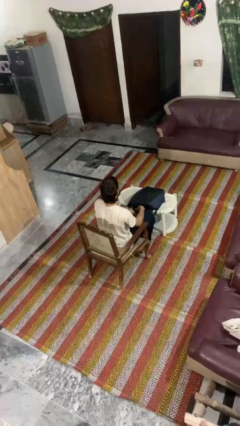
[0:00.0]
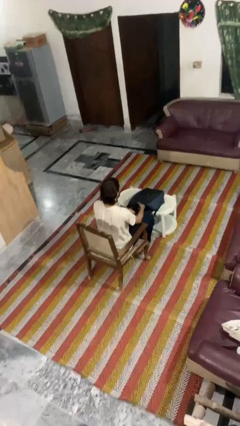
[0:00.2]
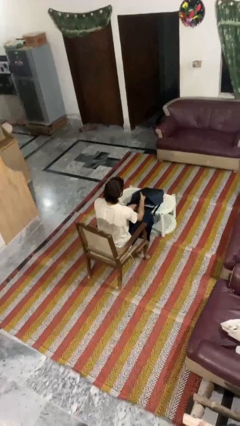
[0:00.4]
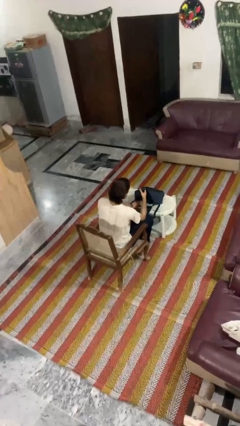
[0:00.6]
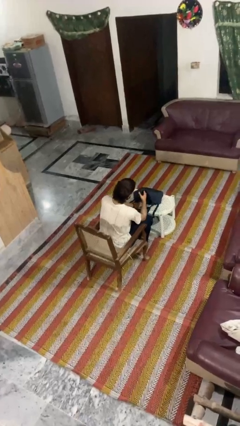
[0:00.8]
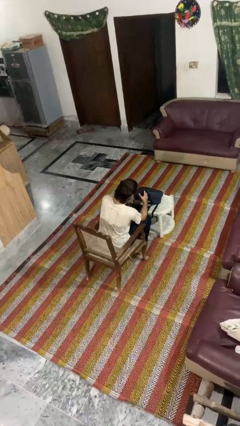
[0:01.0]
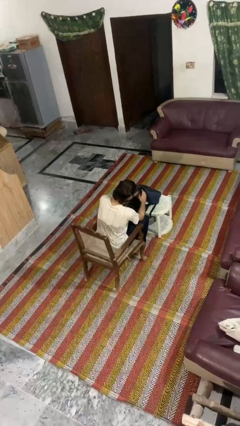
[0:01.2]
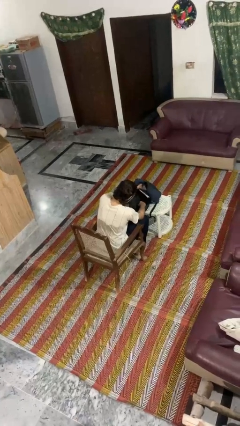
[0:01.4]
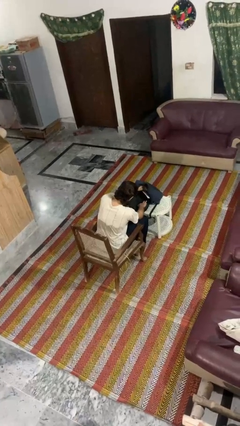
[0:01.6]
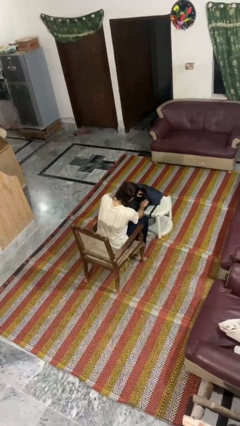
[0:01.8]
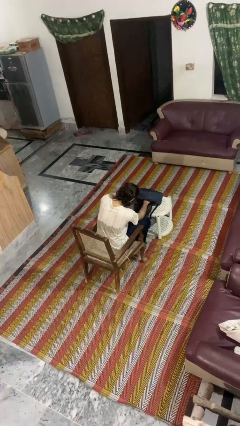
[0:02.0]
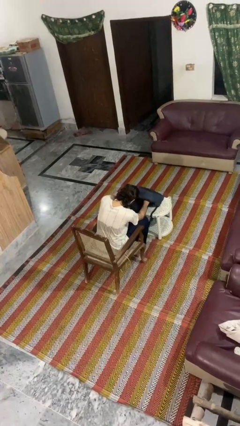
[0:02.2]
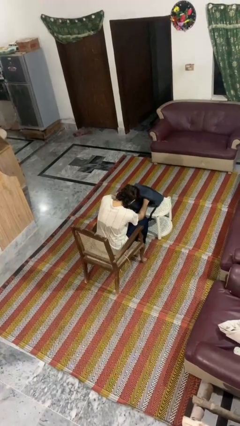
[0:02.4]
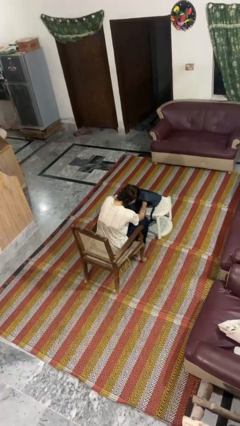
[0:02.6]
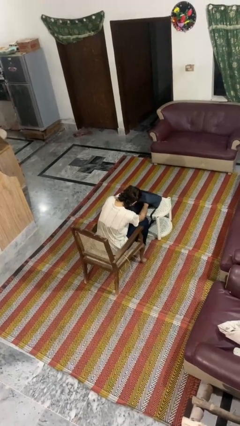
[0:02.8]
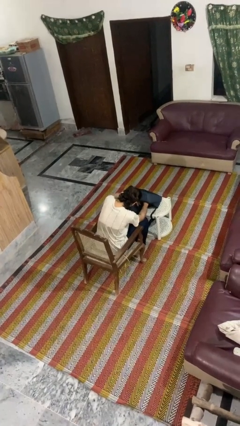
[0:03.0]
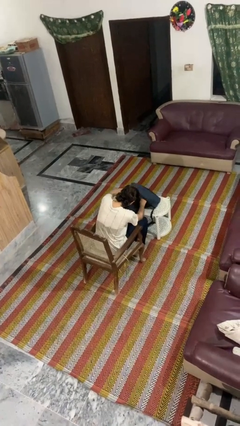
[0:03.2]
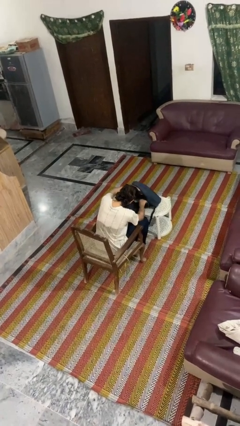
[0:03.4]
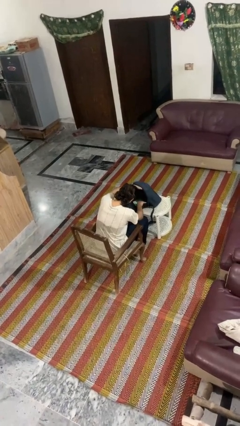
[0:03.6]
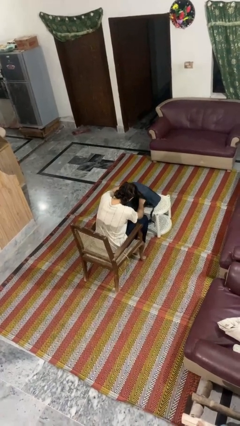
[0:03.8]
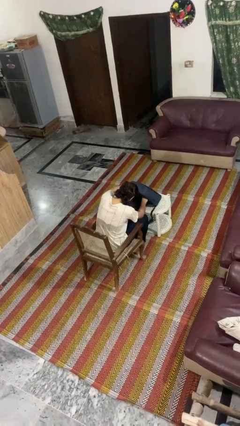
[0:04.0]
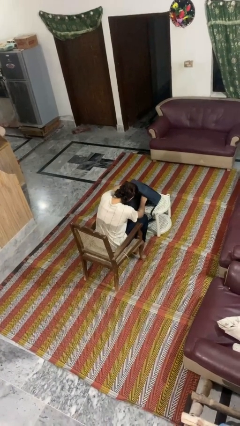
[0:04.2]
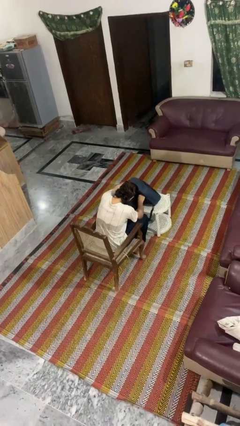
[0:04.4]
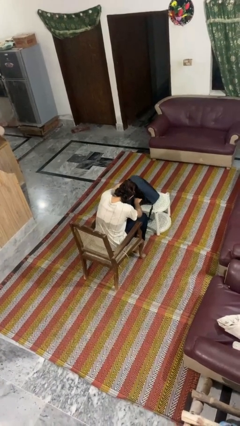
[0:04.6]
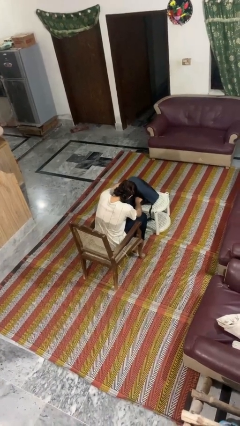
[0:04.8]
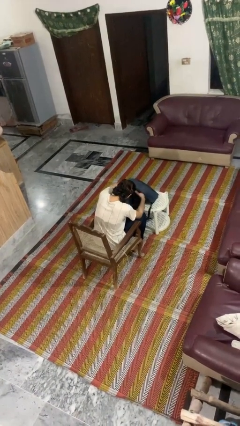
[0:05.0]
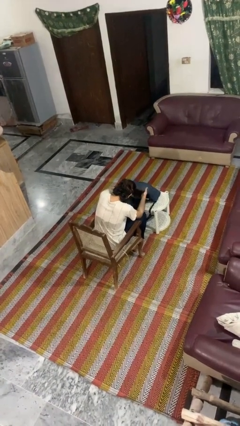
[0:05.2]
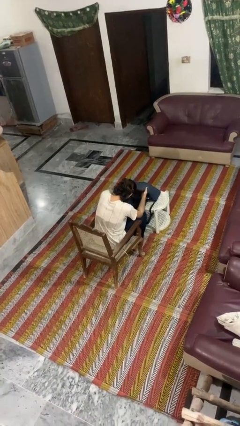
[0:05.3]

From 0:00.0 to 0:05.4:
person searches in backpack

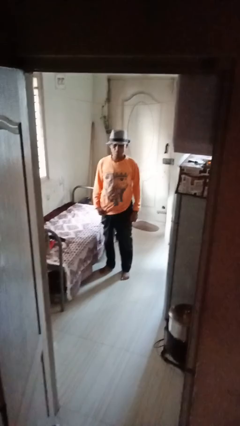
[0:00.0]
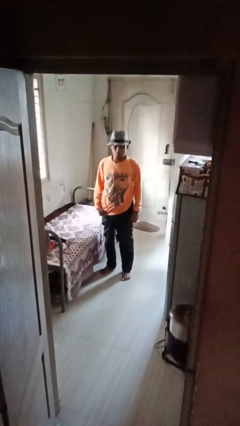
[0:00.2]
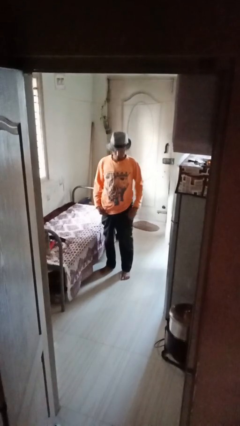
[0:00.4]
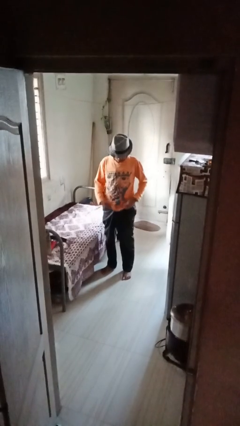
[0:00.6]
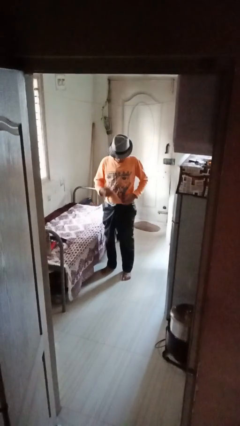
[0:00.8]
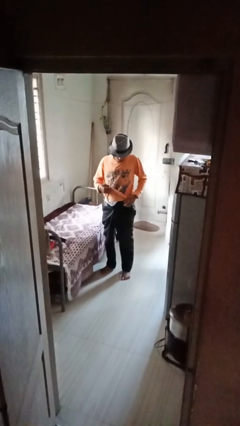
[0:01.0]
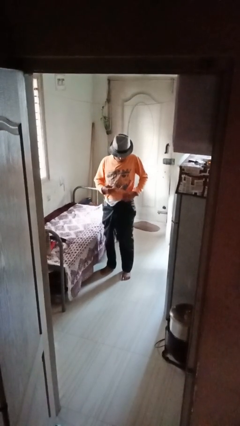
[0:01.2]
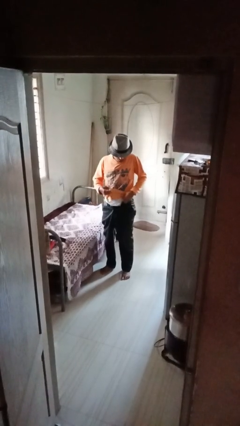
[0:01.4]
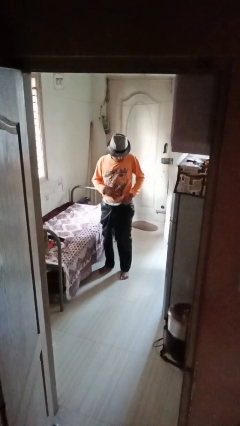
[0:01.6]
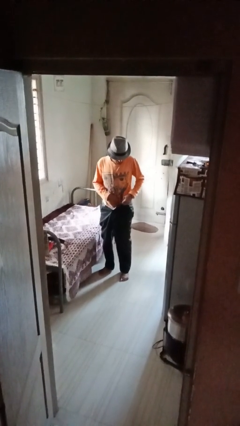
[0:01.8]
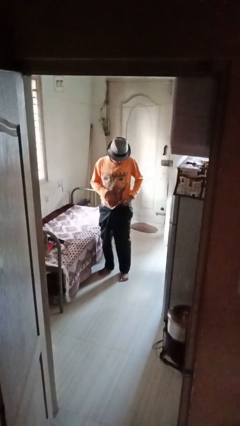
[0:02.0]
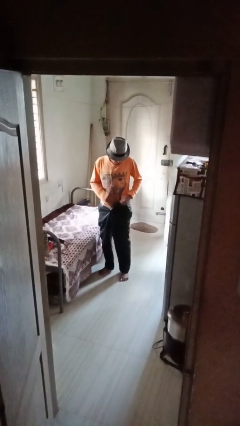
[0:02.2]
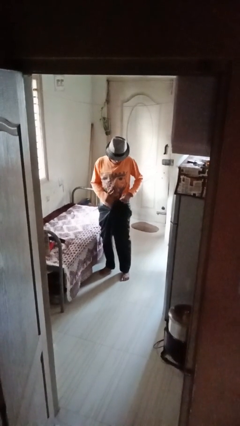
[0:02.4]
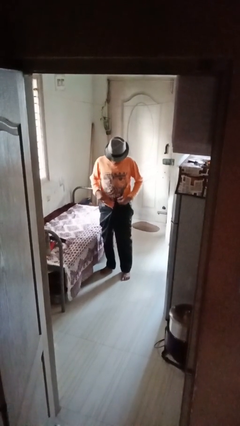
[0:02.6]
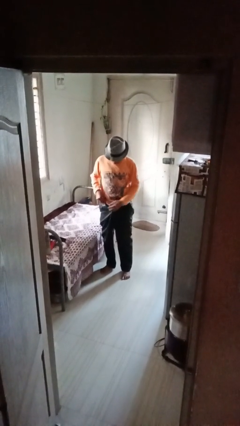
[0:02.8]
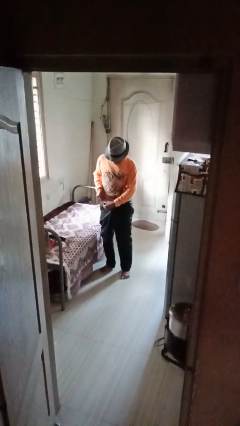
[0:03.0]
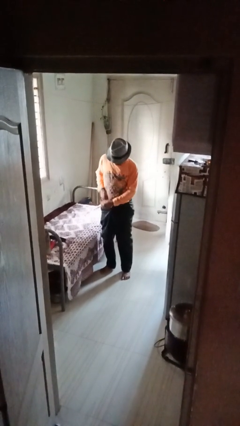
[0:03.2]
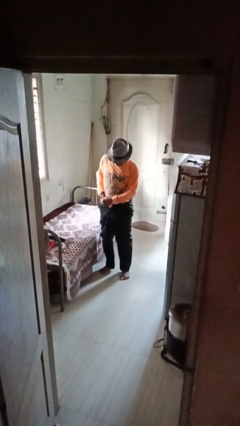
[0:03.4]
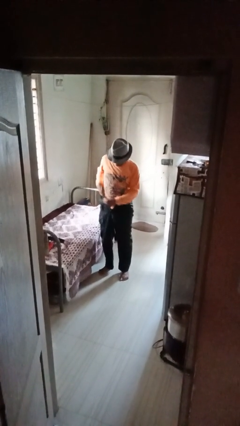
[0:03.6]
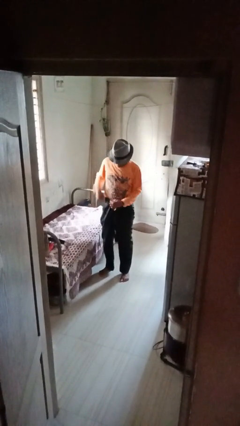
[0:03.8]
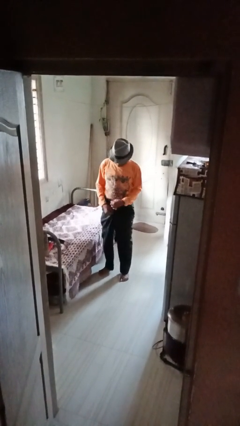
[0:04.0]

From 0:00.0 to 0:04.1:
person tucks in shirt

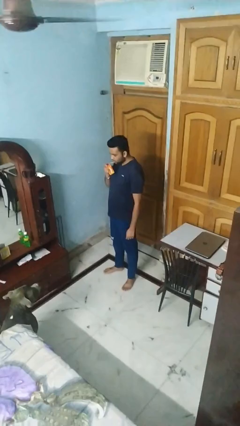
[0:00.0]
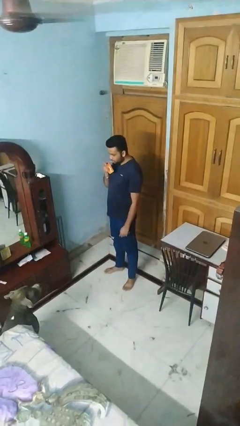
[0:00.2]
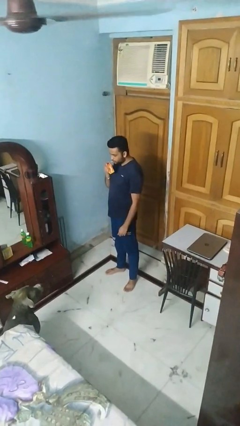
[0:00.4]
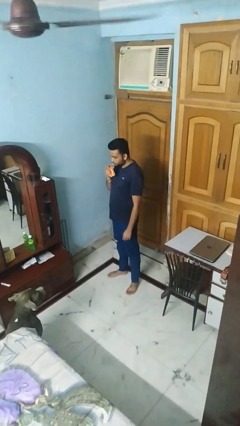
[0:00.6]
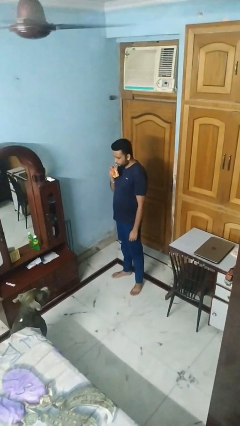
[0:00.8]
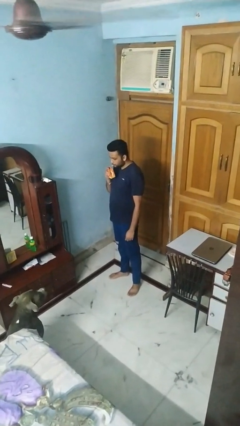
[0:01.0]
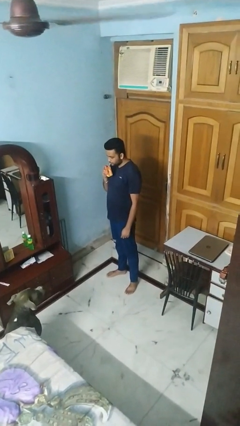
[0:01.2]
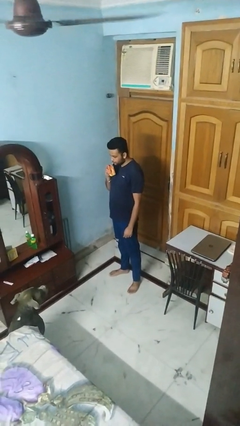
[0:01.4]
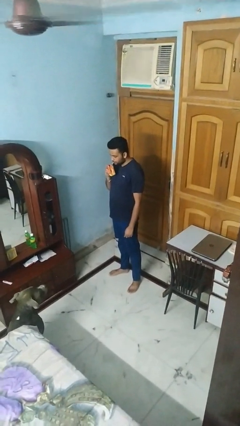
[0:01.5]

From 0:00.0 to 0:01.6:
person drinks from straw

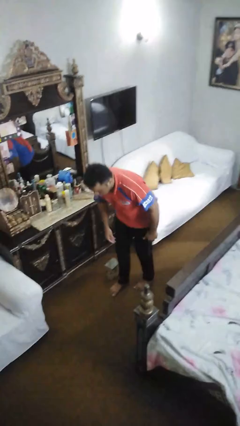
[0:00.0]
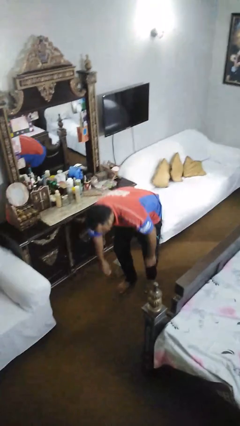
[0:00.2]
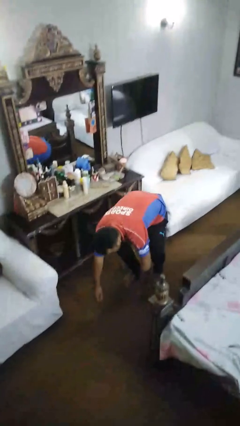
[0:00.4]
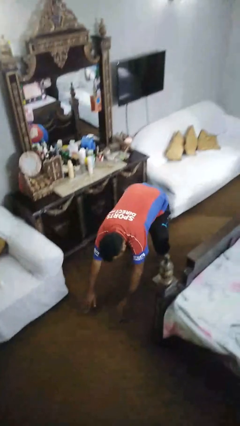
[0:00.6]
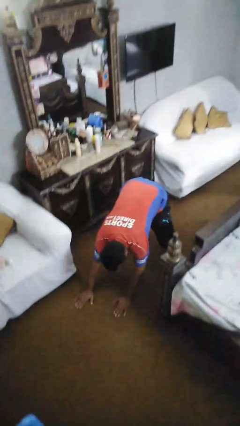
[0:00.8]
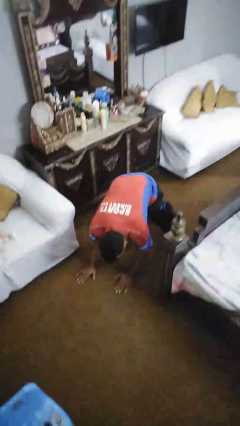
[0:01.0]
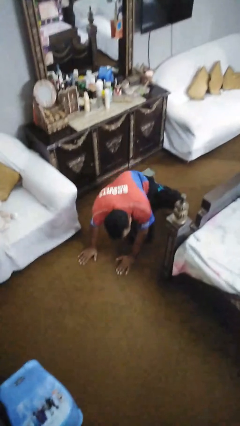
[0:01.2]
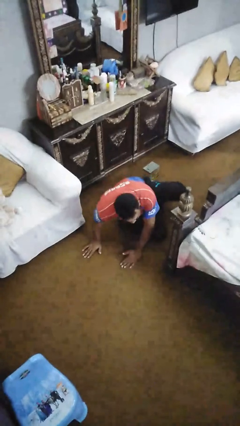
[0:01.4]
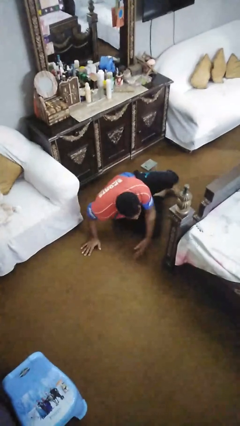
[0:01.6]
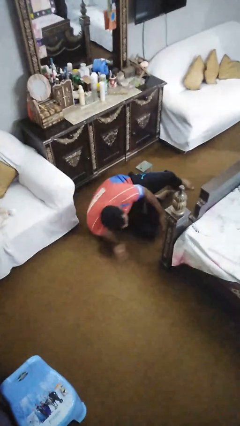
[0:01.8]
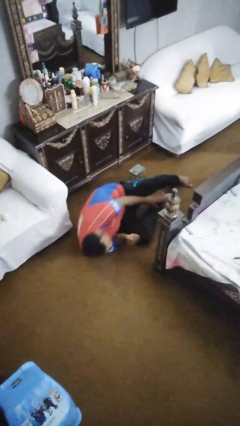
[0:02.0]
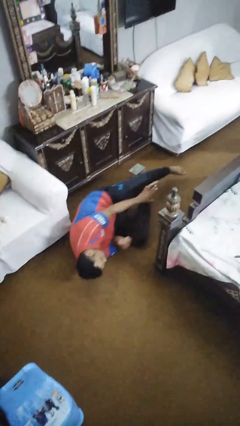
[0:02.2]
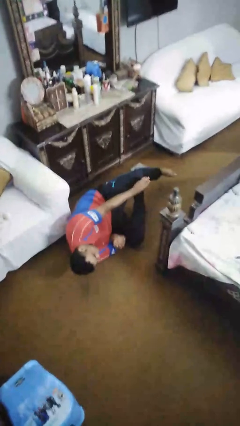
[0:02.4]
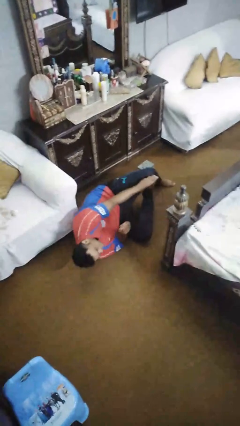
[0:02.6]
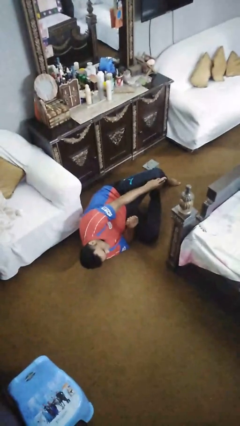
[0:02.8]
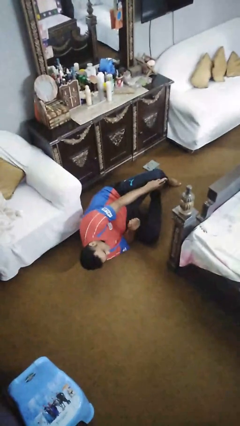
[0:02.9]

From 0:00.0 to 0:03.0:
person lies down on floor

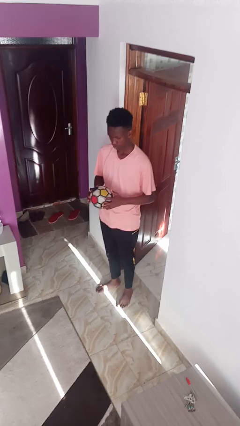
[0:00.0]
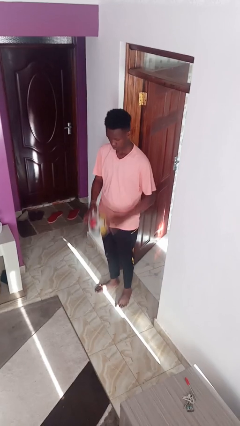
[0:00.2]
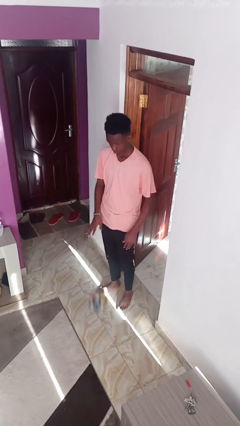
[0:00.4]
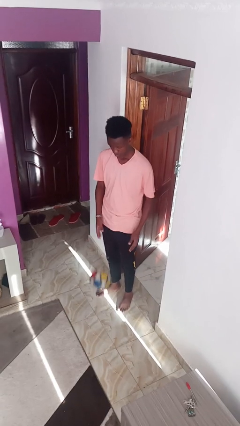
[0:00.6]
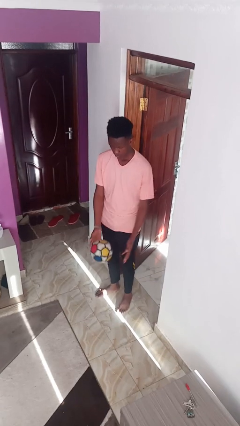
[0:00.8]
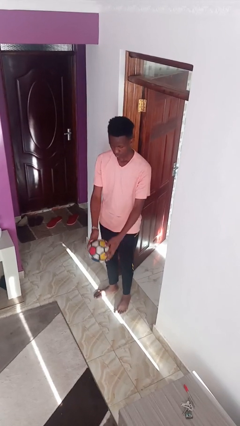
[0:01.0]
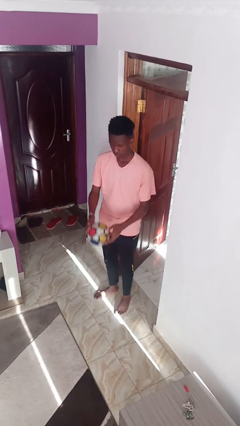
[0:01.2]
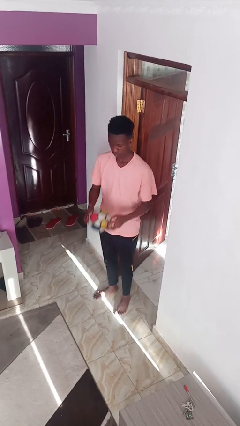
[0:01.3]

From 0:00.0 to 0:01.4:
person bounces ball on floor

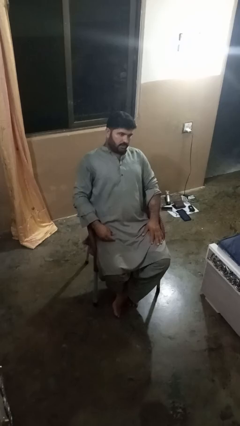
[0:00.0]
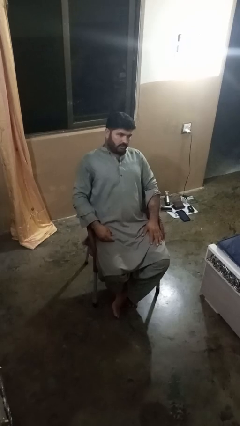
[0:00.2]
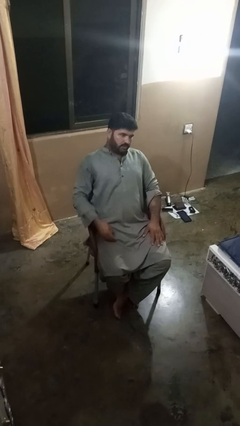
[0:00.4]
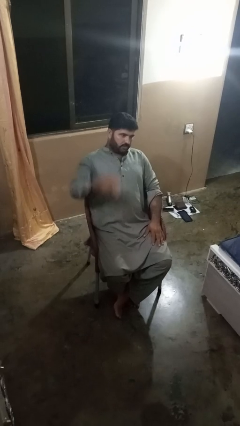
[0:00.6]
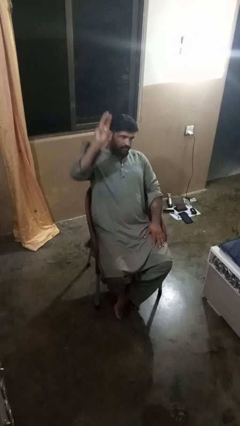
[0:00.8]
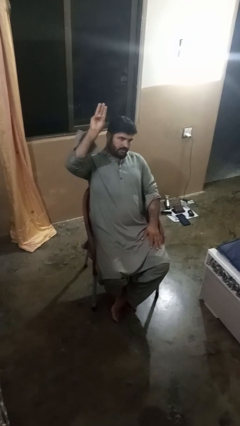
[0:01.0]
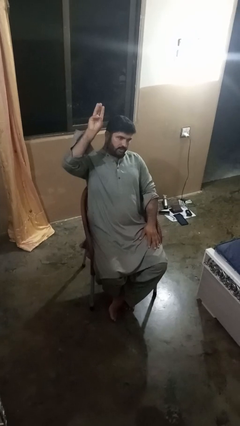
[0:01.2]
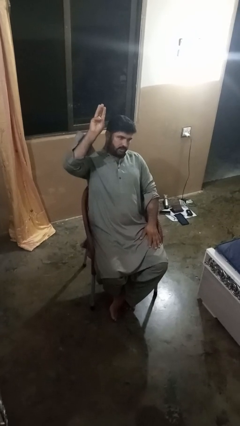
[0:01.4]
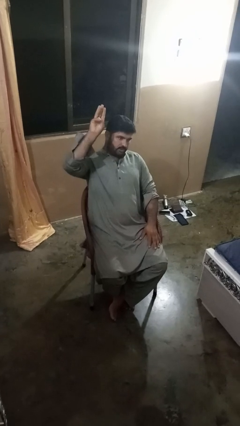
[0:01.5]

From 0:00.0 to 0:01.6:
person gestures number three

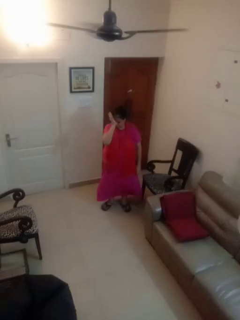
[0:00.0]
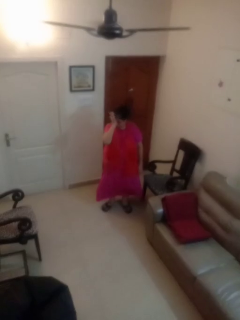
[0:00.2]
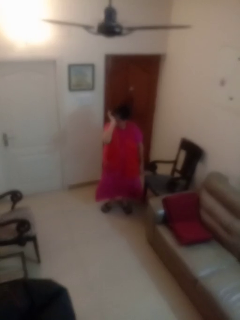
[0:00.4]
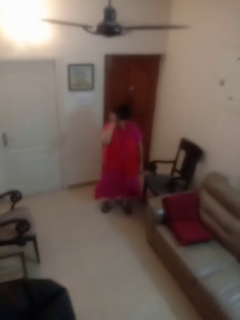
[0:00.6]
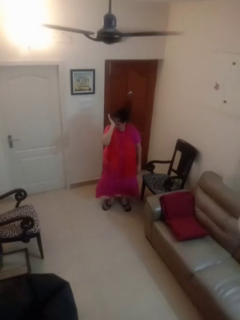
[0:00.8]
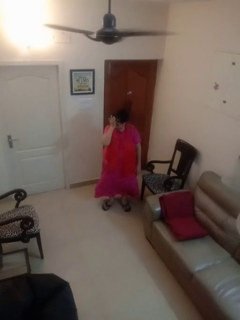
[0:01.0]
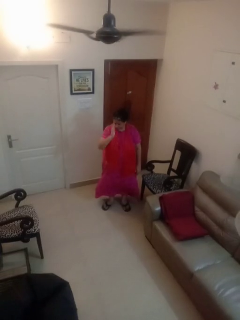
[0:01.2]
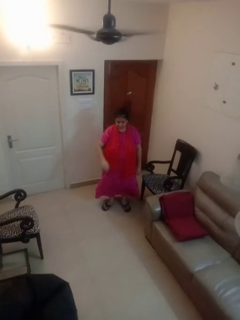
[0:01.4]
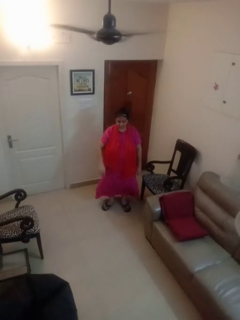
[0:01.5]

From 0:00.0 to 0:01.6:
person rubs eyes
